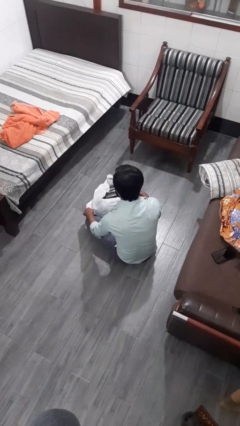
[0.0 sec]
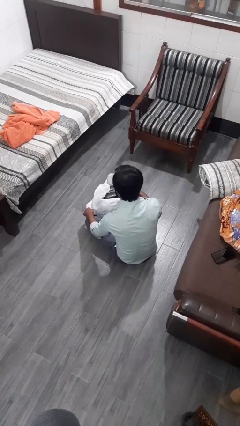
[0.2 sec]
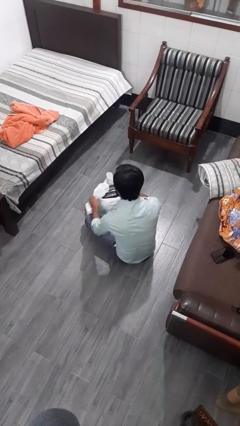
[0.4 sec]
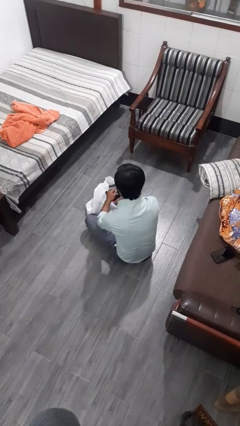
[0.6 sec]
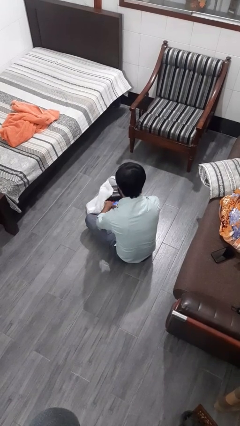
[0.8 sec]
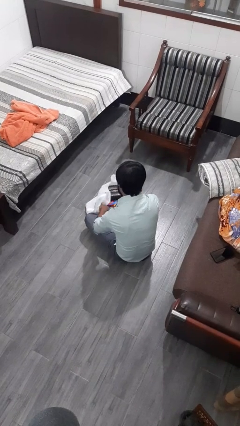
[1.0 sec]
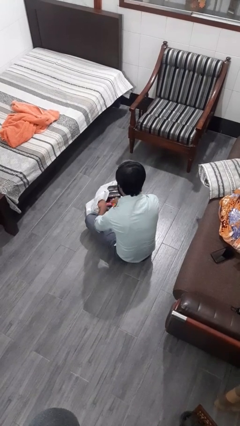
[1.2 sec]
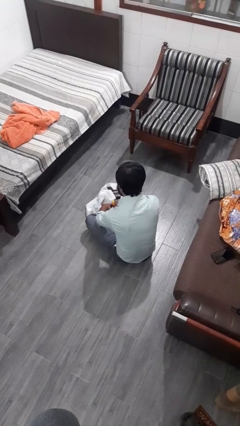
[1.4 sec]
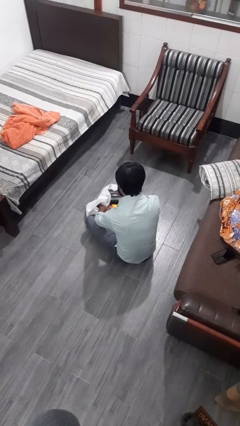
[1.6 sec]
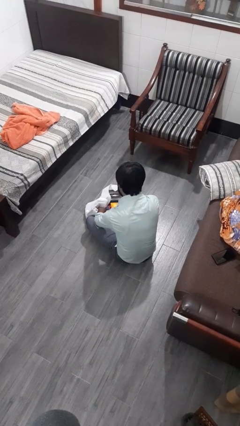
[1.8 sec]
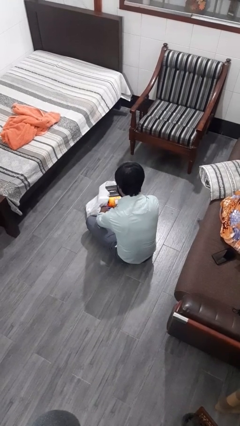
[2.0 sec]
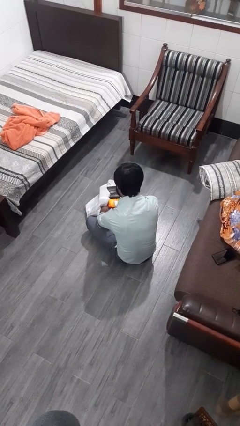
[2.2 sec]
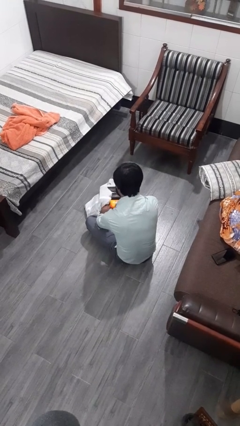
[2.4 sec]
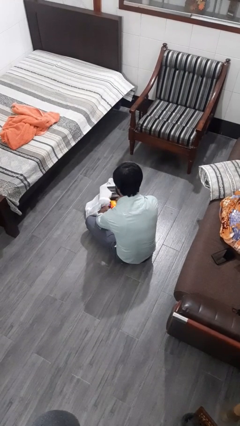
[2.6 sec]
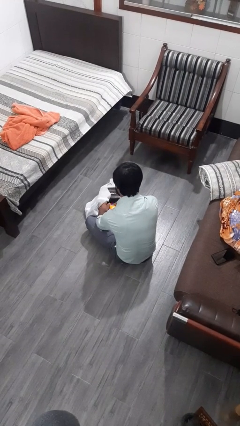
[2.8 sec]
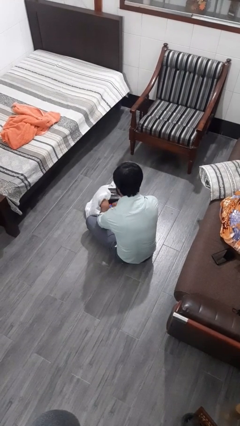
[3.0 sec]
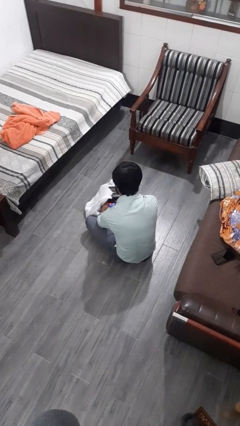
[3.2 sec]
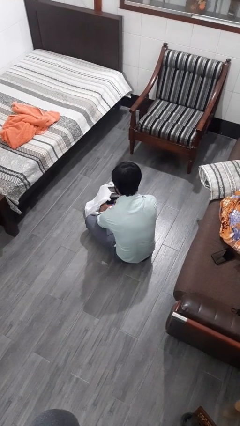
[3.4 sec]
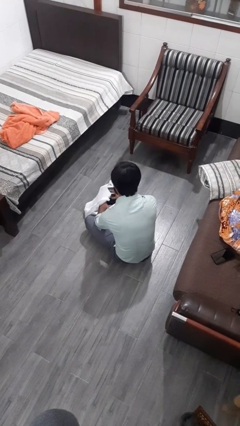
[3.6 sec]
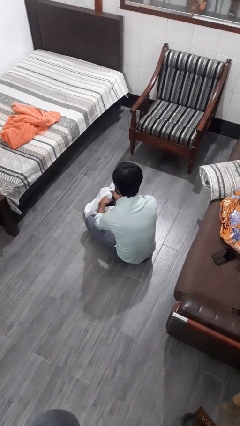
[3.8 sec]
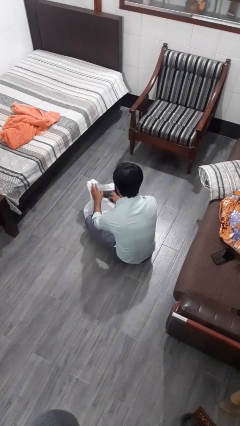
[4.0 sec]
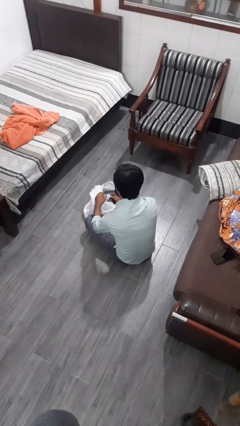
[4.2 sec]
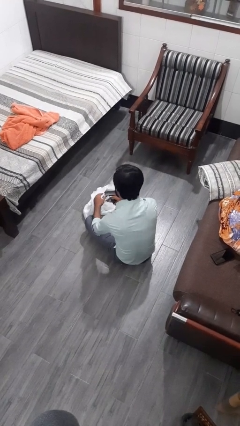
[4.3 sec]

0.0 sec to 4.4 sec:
person searches in bag

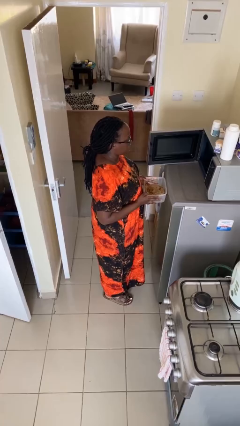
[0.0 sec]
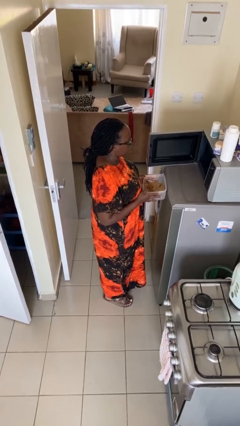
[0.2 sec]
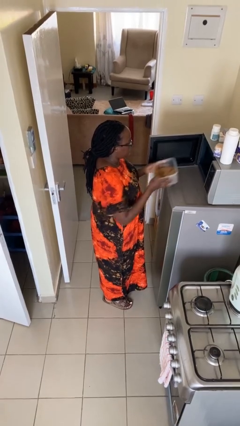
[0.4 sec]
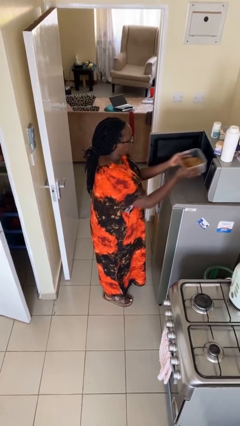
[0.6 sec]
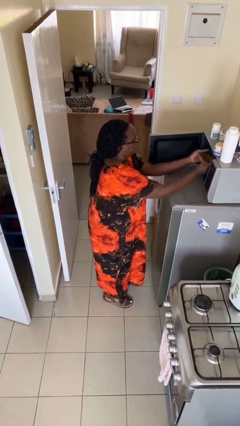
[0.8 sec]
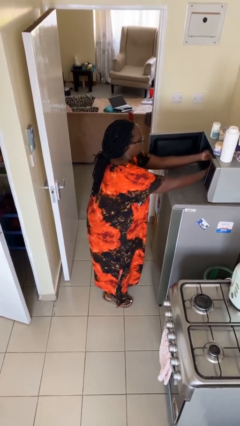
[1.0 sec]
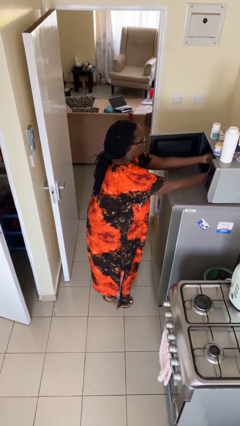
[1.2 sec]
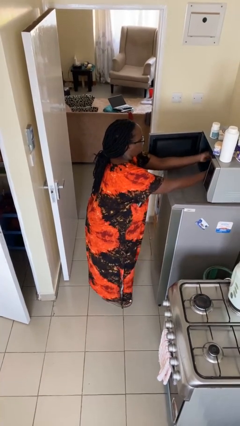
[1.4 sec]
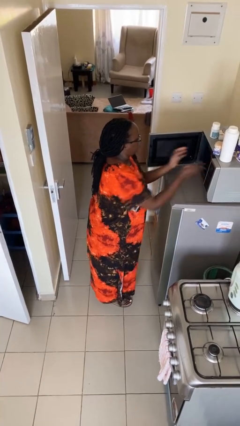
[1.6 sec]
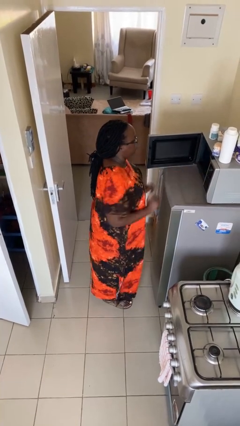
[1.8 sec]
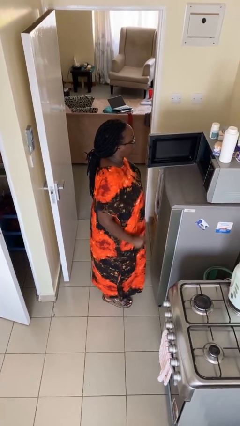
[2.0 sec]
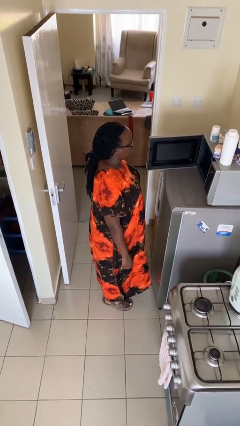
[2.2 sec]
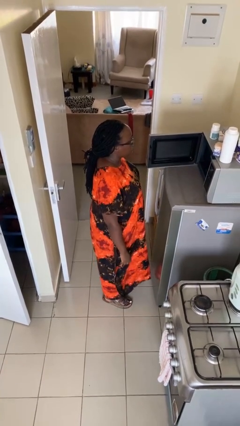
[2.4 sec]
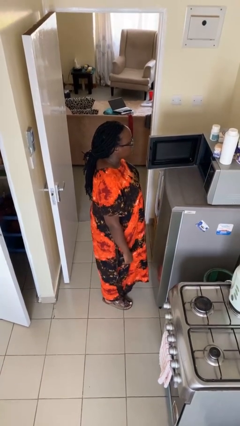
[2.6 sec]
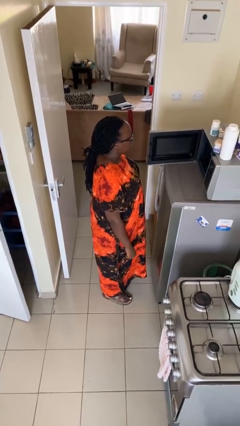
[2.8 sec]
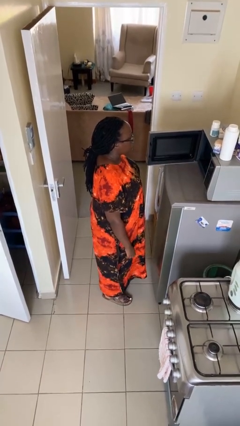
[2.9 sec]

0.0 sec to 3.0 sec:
person puts object into microwave

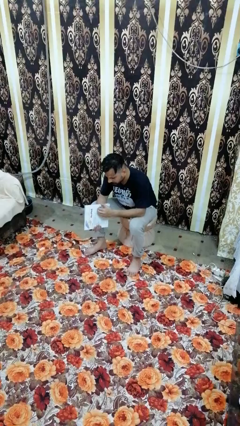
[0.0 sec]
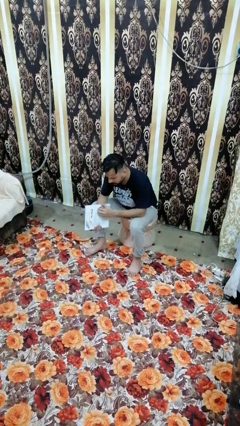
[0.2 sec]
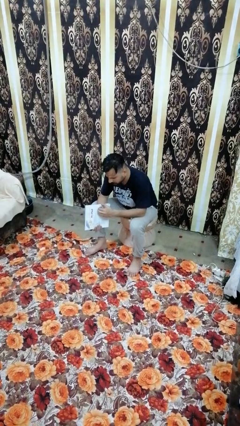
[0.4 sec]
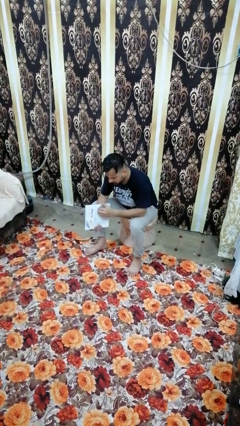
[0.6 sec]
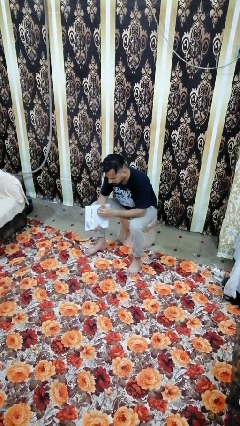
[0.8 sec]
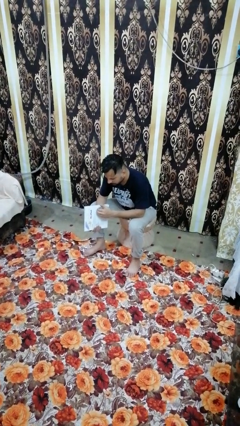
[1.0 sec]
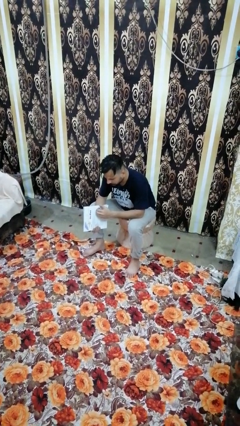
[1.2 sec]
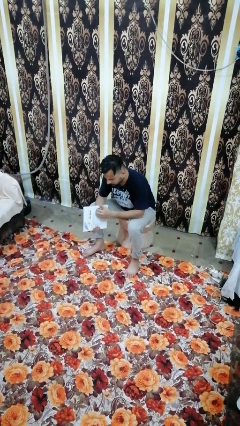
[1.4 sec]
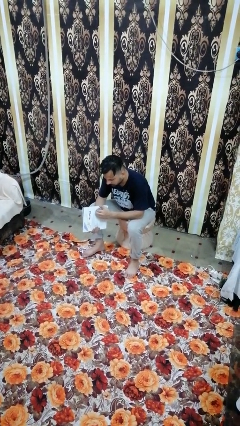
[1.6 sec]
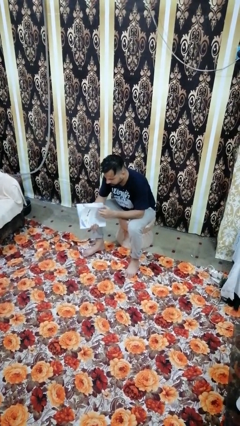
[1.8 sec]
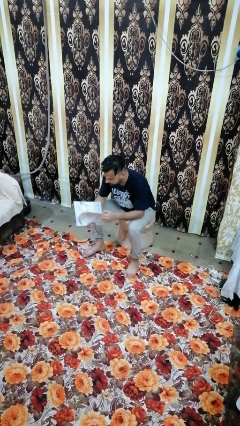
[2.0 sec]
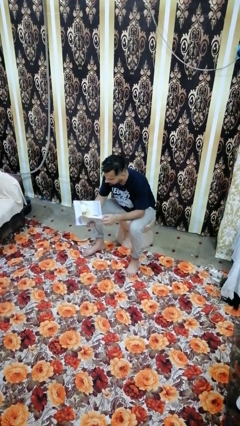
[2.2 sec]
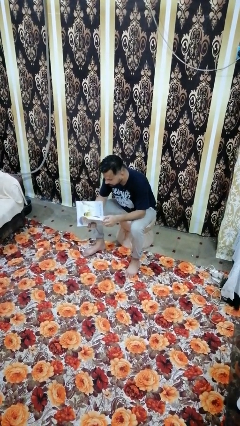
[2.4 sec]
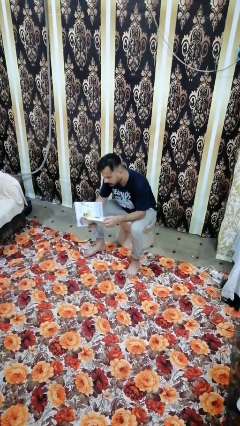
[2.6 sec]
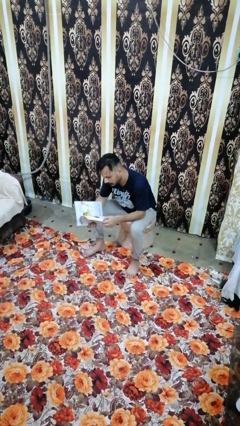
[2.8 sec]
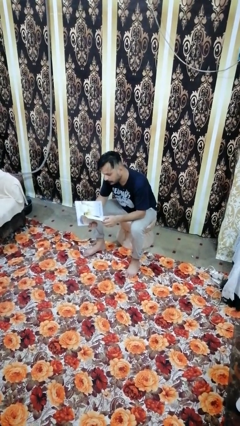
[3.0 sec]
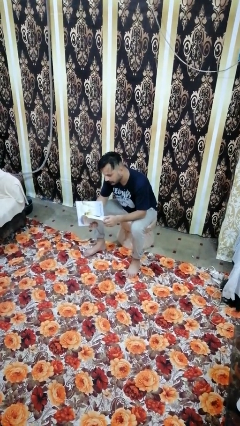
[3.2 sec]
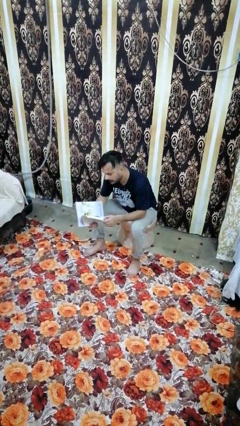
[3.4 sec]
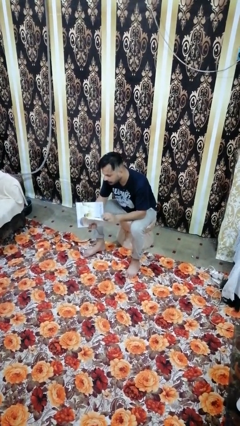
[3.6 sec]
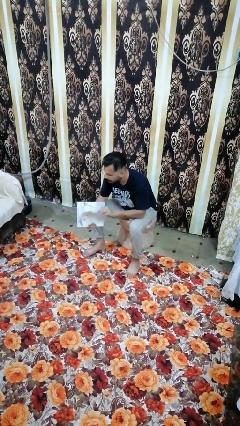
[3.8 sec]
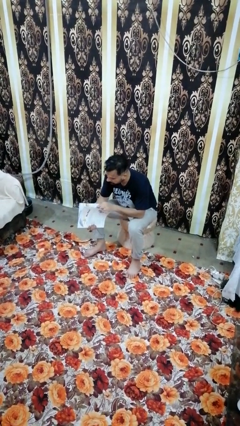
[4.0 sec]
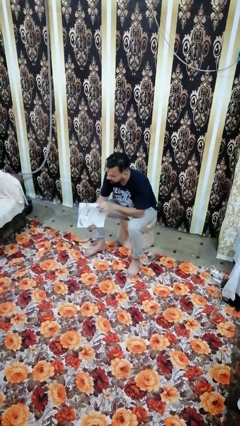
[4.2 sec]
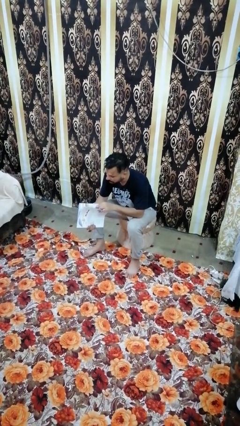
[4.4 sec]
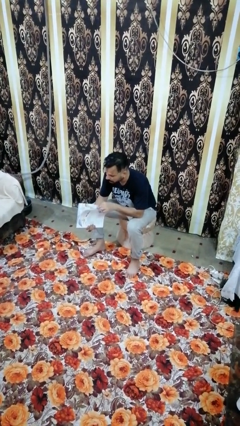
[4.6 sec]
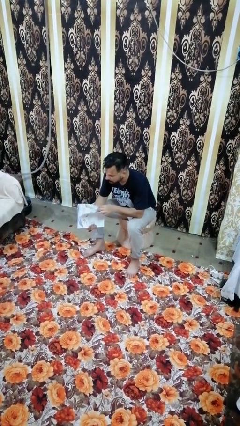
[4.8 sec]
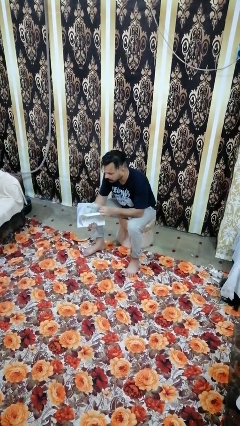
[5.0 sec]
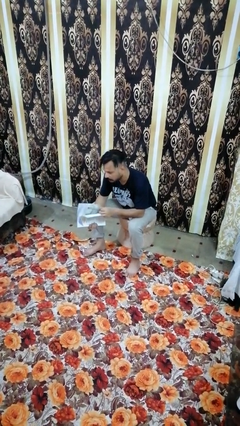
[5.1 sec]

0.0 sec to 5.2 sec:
person reads magazine

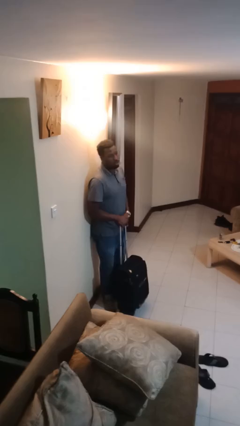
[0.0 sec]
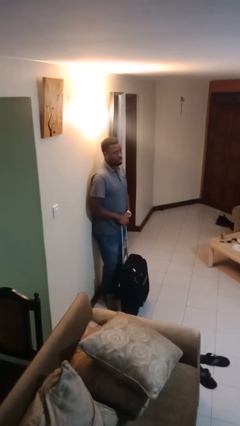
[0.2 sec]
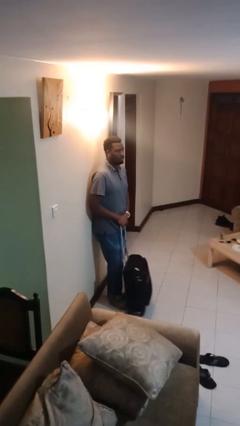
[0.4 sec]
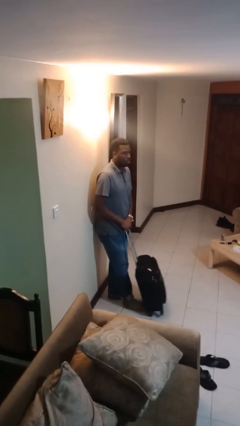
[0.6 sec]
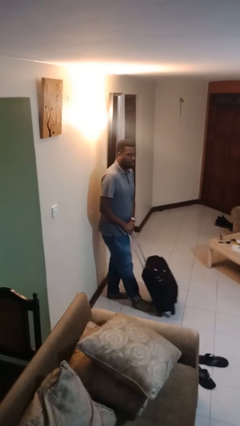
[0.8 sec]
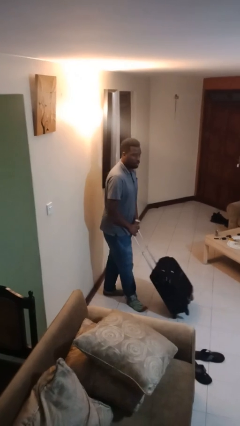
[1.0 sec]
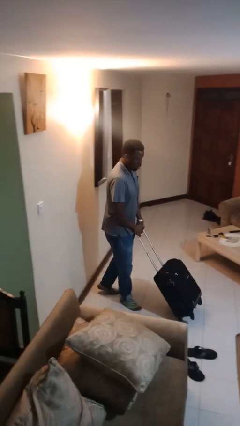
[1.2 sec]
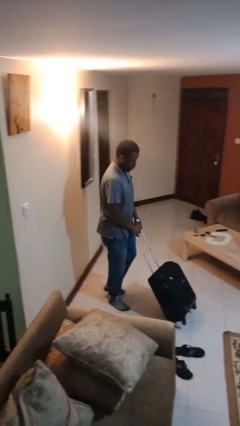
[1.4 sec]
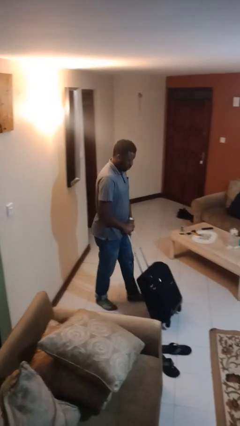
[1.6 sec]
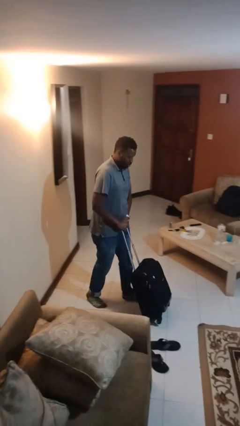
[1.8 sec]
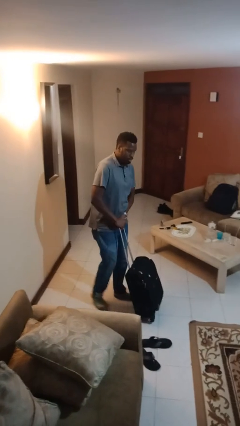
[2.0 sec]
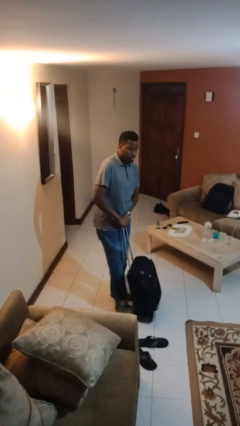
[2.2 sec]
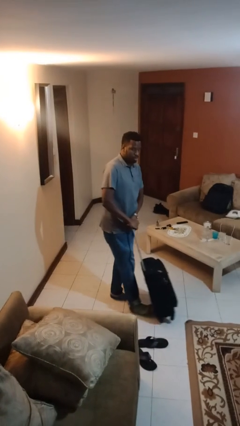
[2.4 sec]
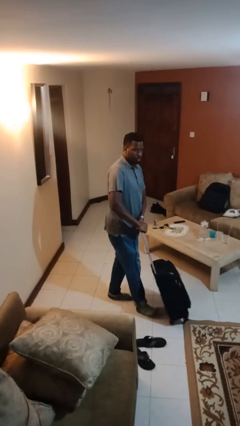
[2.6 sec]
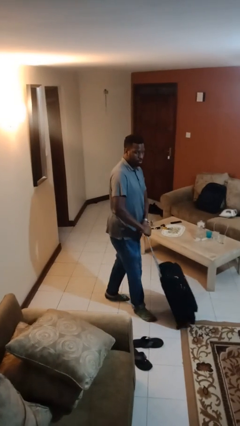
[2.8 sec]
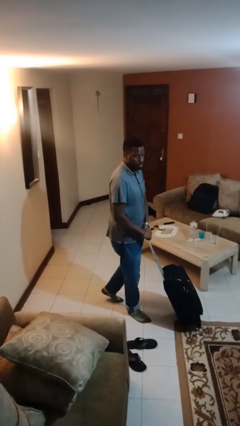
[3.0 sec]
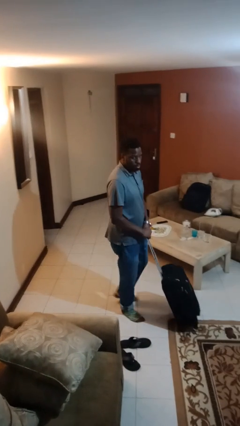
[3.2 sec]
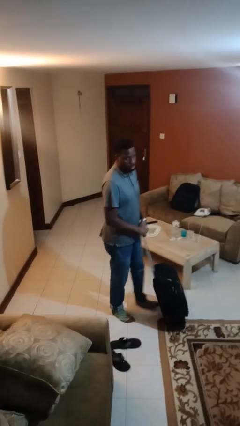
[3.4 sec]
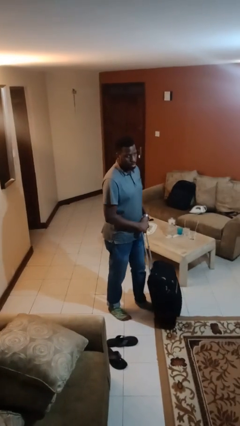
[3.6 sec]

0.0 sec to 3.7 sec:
person pushes wheeled cart

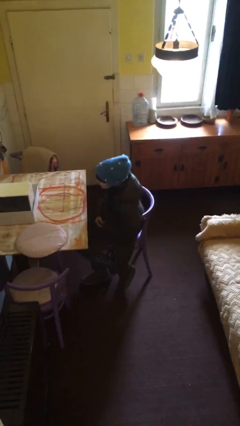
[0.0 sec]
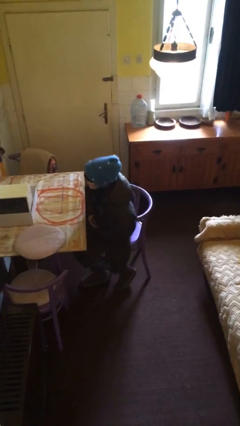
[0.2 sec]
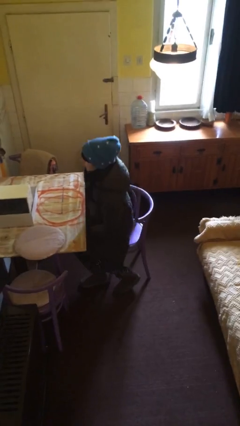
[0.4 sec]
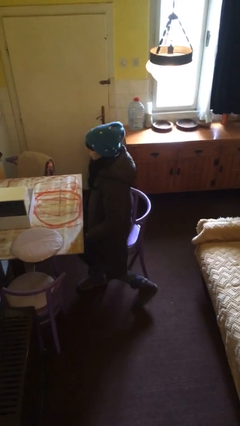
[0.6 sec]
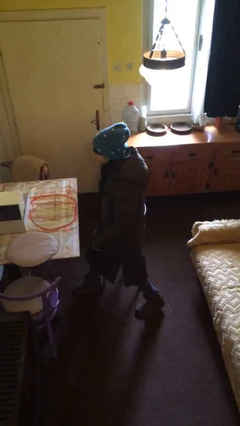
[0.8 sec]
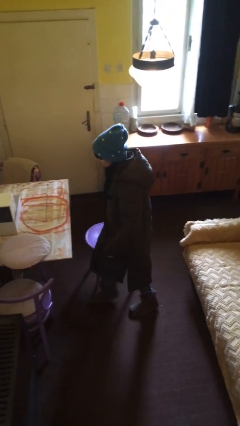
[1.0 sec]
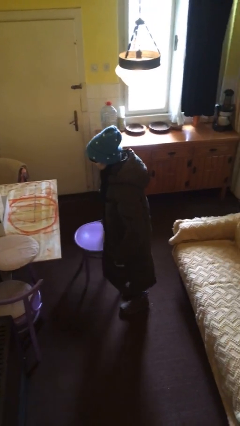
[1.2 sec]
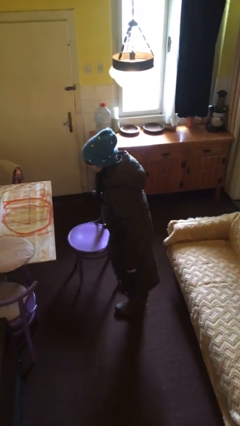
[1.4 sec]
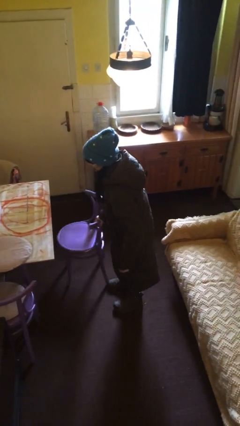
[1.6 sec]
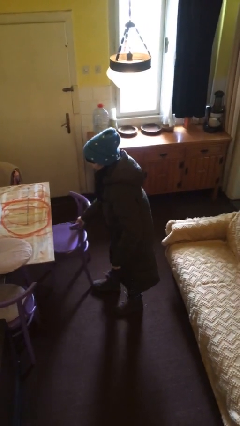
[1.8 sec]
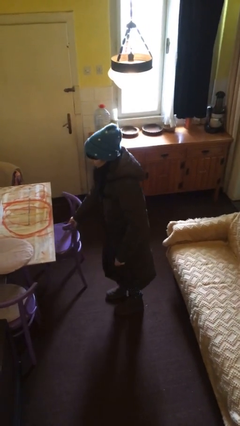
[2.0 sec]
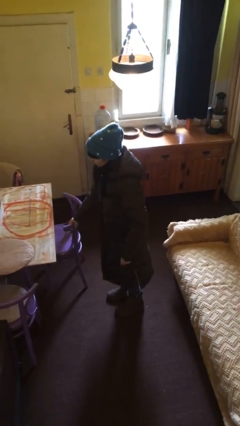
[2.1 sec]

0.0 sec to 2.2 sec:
person stands up
